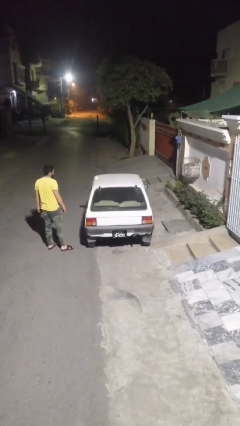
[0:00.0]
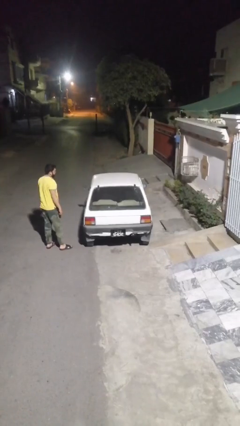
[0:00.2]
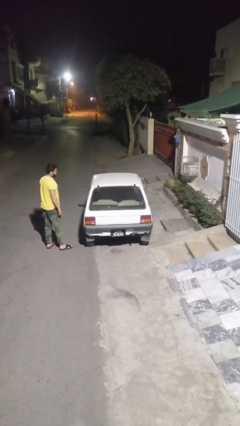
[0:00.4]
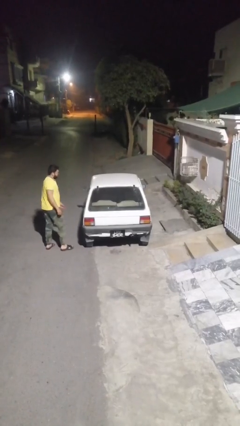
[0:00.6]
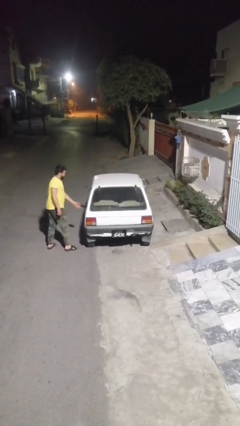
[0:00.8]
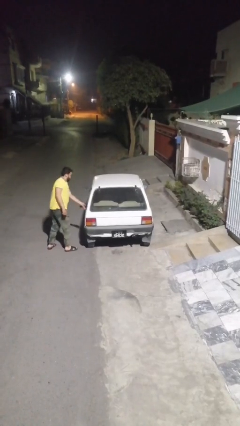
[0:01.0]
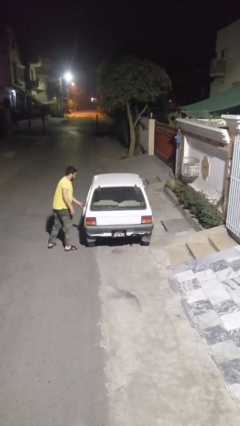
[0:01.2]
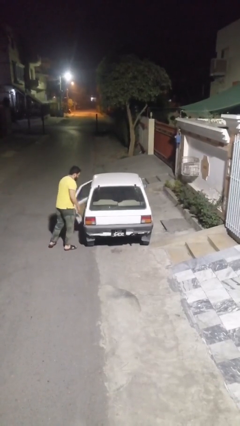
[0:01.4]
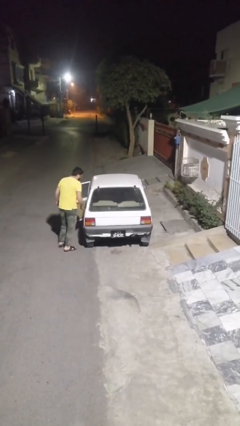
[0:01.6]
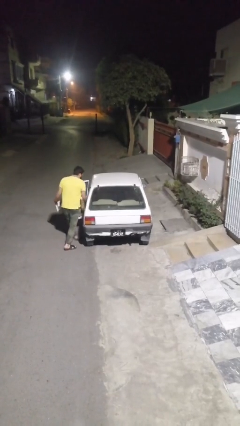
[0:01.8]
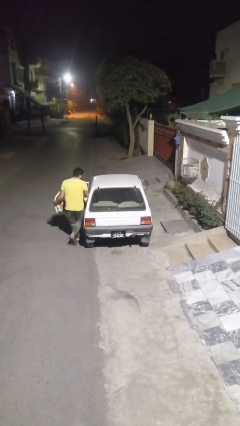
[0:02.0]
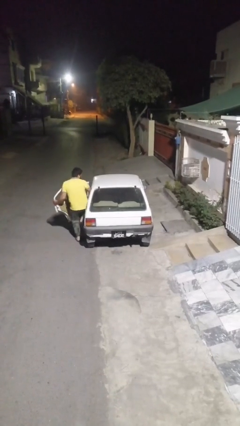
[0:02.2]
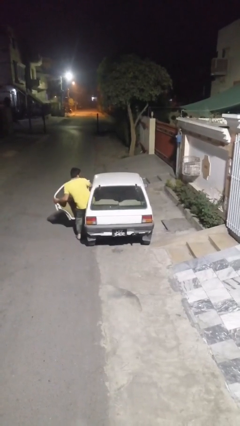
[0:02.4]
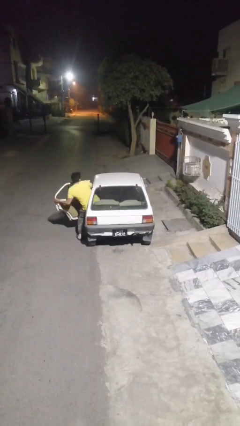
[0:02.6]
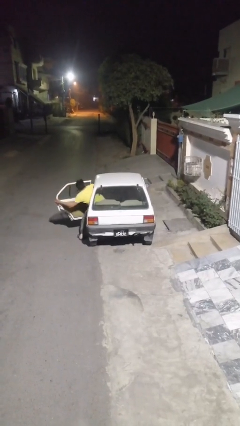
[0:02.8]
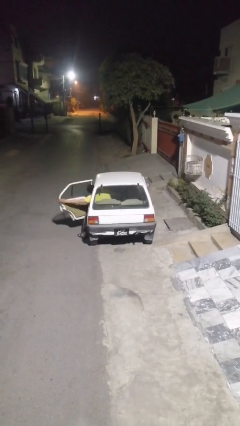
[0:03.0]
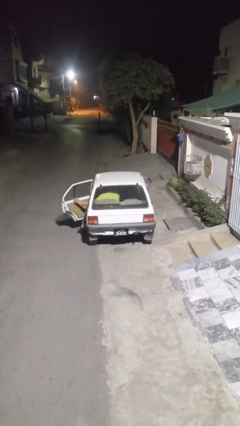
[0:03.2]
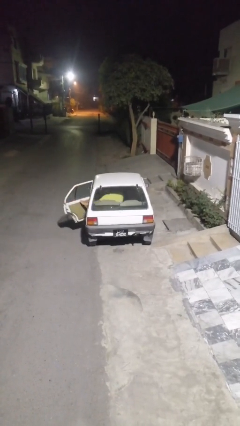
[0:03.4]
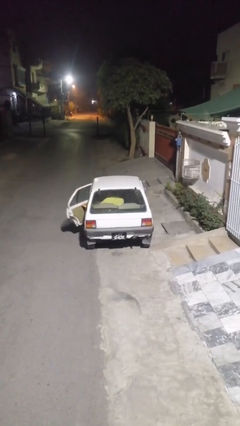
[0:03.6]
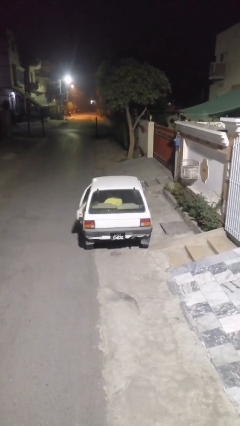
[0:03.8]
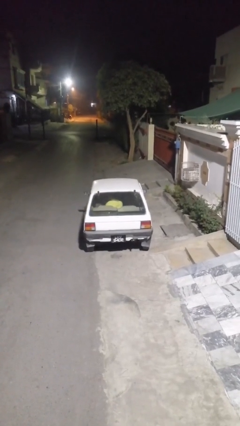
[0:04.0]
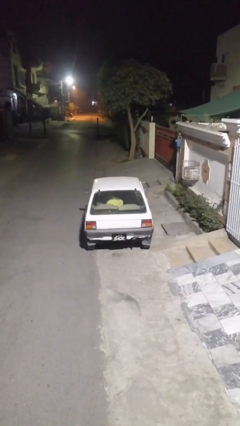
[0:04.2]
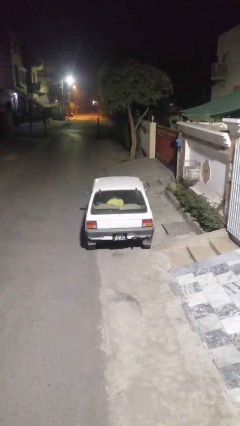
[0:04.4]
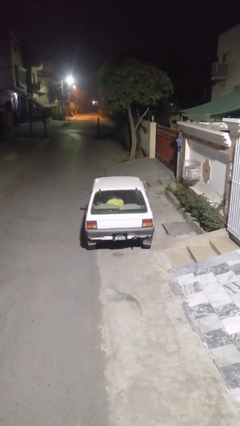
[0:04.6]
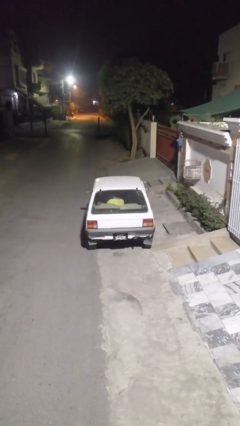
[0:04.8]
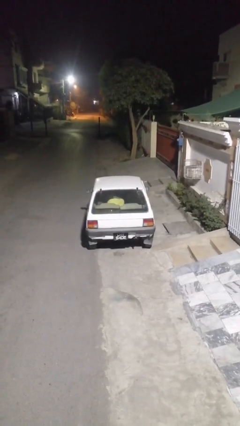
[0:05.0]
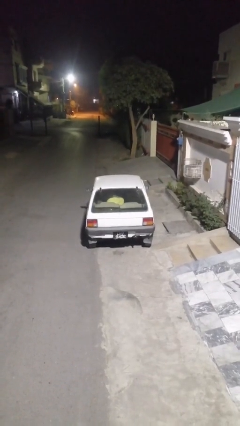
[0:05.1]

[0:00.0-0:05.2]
car picks up person

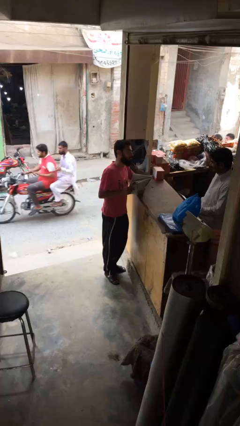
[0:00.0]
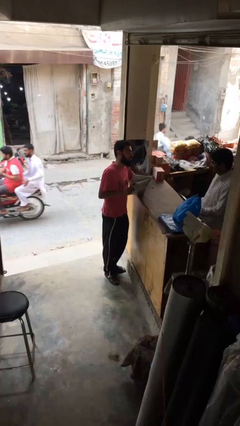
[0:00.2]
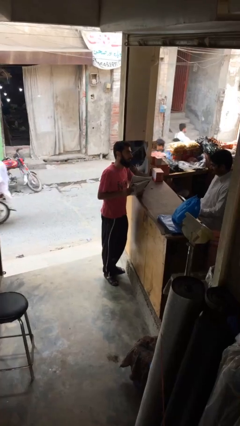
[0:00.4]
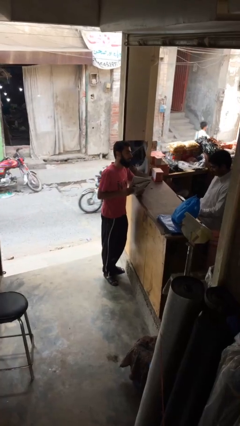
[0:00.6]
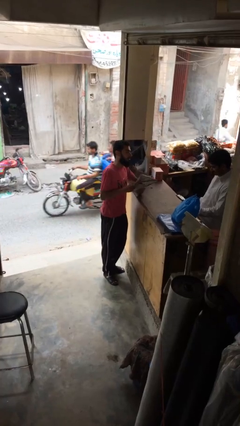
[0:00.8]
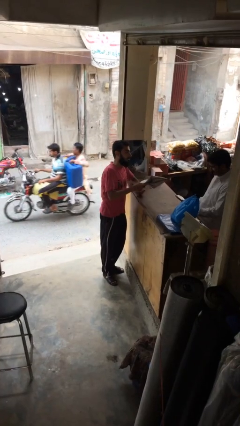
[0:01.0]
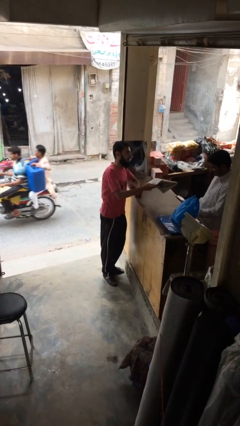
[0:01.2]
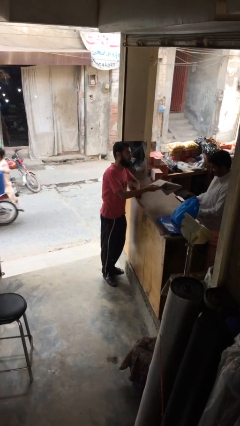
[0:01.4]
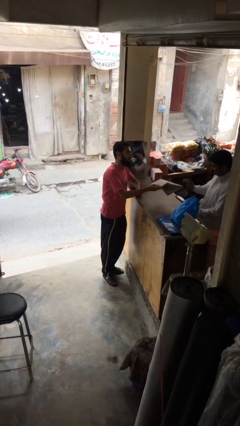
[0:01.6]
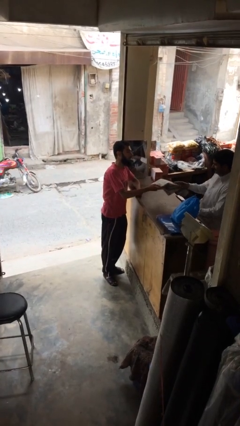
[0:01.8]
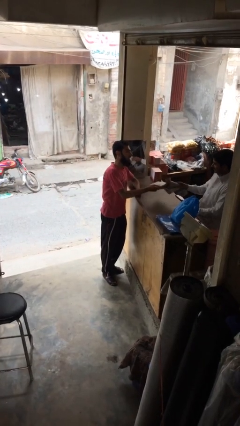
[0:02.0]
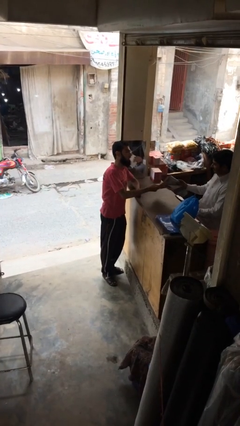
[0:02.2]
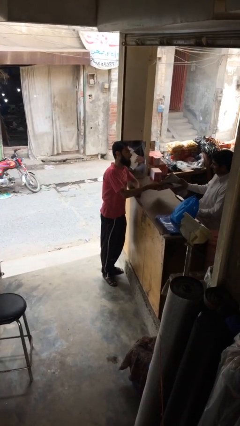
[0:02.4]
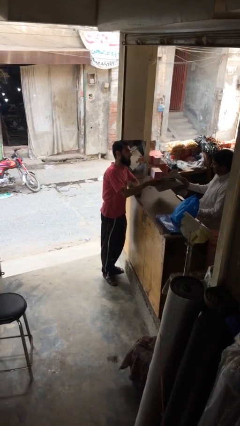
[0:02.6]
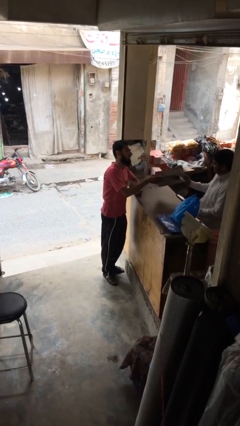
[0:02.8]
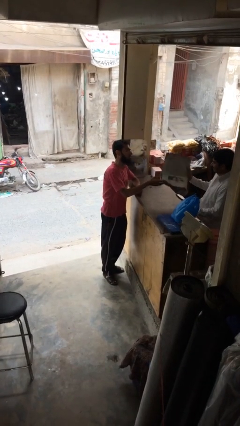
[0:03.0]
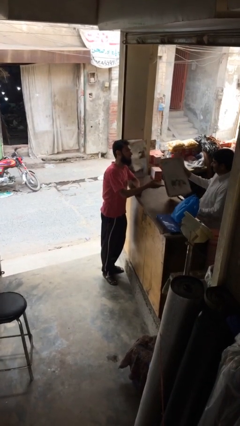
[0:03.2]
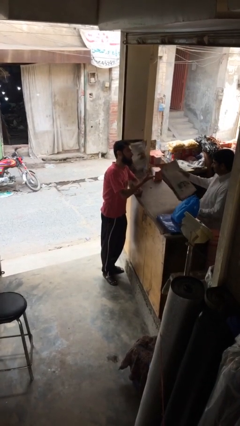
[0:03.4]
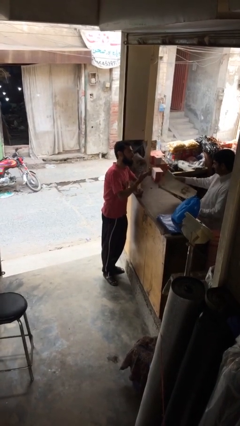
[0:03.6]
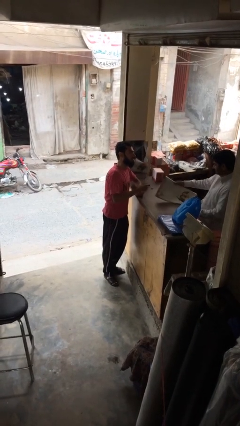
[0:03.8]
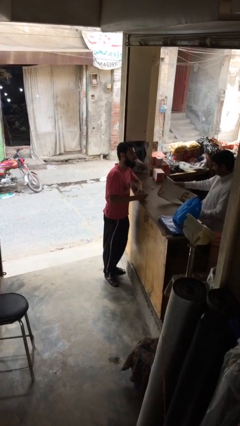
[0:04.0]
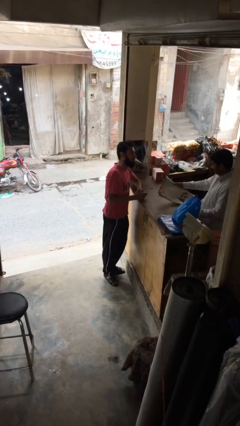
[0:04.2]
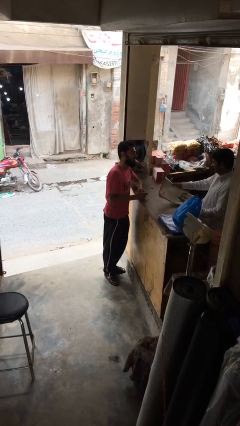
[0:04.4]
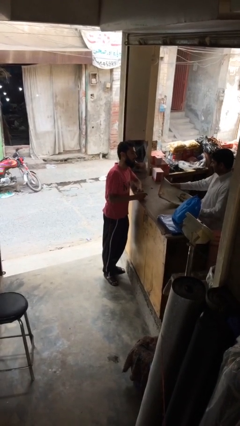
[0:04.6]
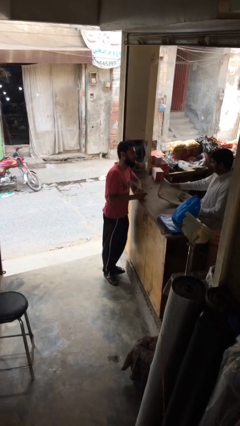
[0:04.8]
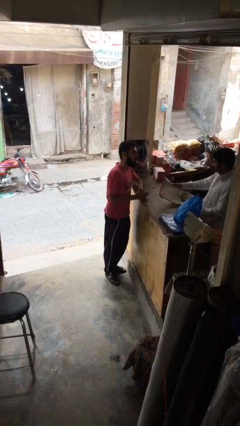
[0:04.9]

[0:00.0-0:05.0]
person transfers object to person

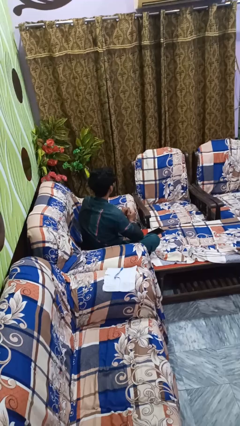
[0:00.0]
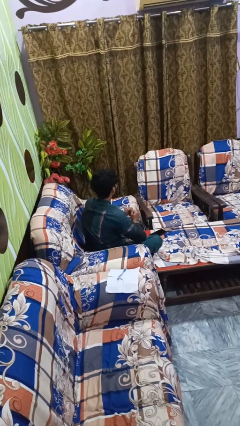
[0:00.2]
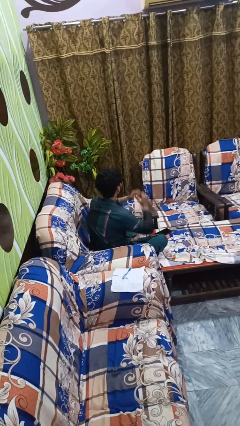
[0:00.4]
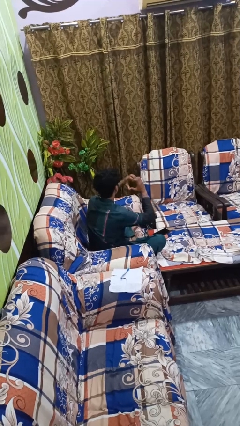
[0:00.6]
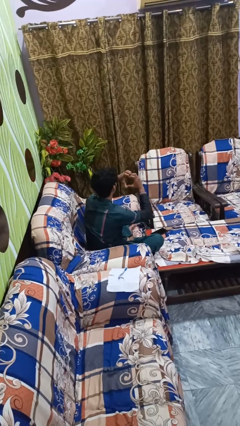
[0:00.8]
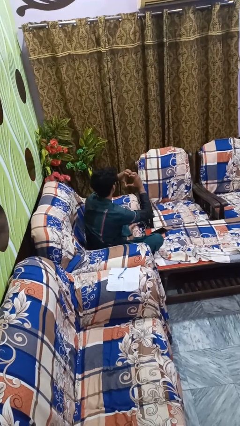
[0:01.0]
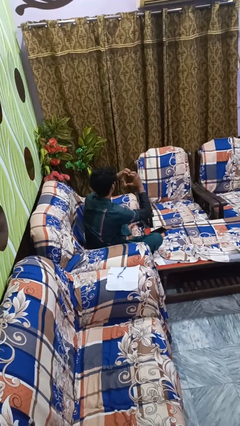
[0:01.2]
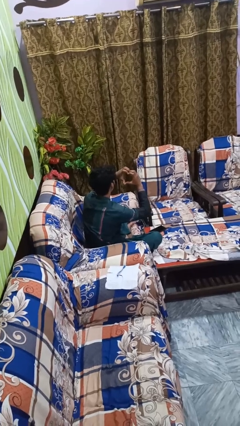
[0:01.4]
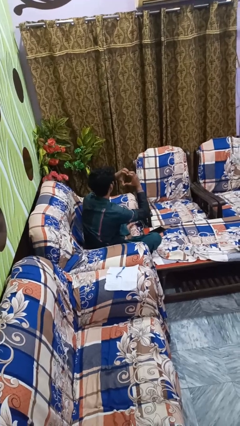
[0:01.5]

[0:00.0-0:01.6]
person gestures heart

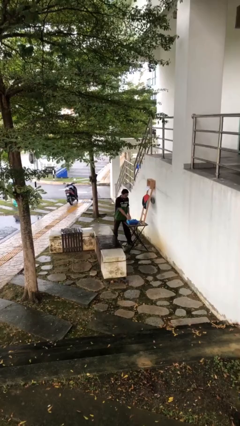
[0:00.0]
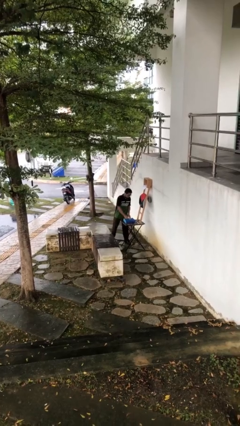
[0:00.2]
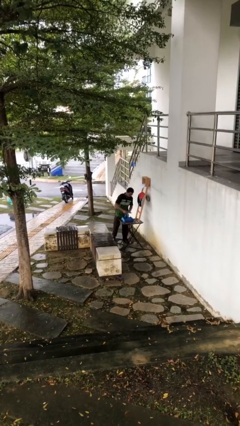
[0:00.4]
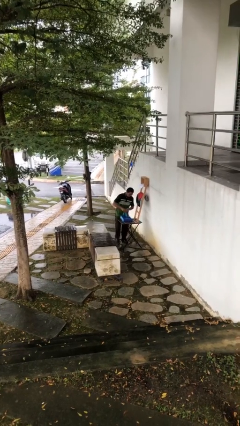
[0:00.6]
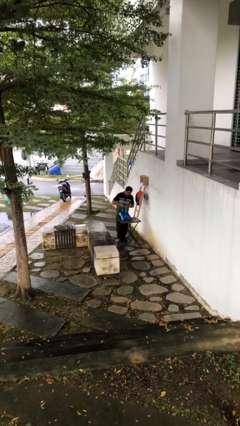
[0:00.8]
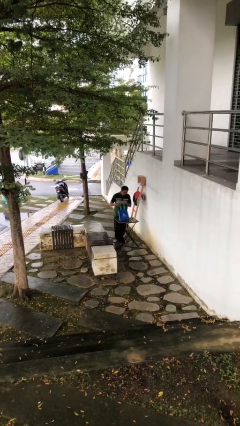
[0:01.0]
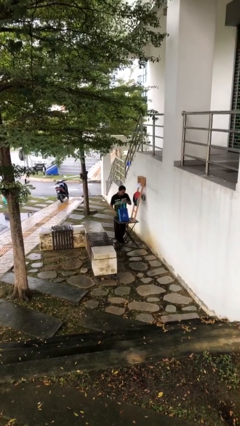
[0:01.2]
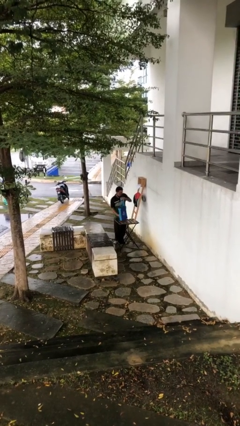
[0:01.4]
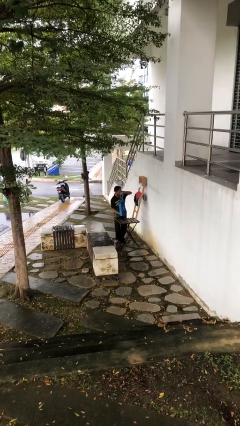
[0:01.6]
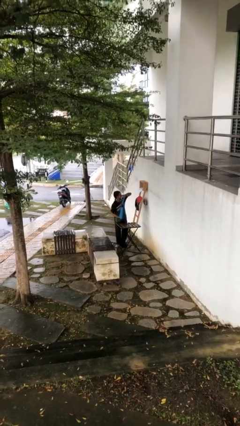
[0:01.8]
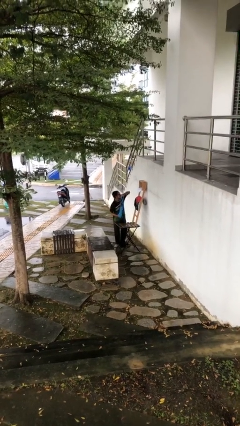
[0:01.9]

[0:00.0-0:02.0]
person picks up object from table

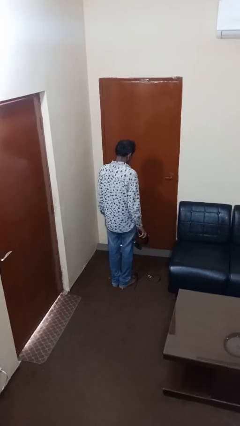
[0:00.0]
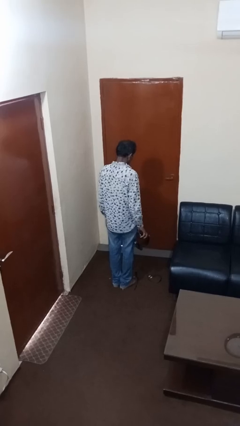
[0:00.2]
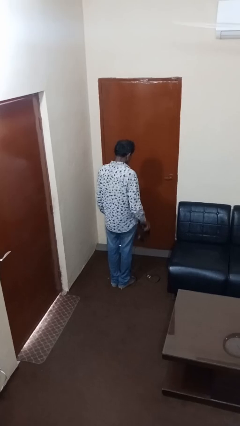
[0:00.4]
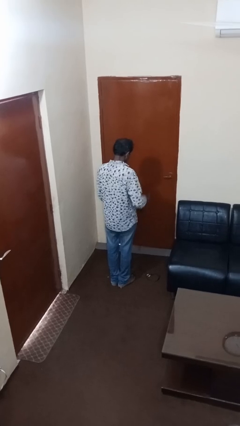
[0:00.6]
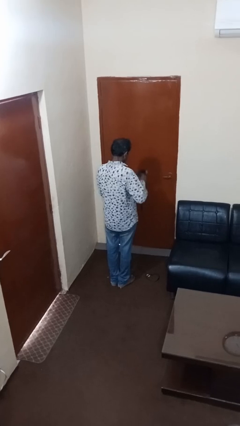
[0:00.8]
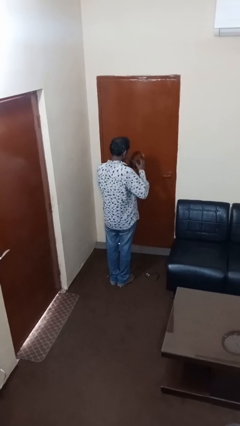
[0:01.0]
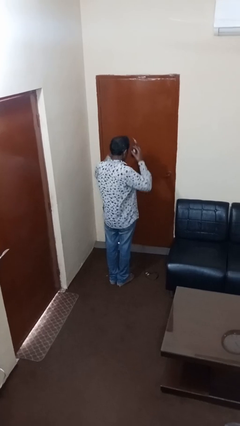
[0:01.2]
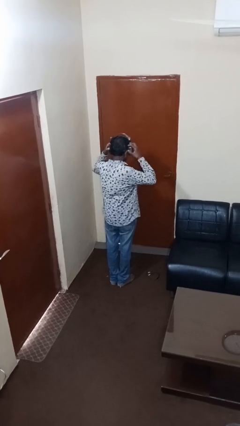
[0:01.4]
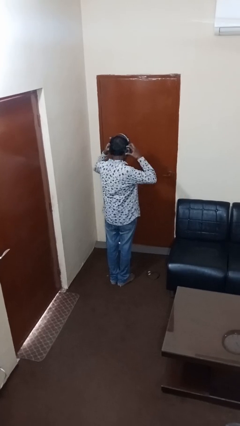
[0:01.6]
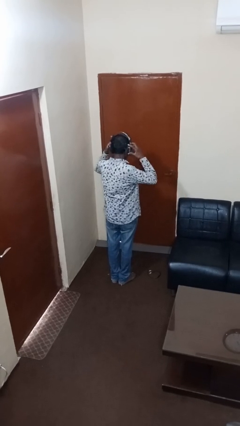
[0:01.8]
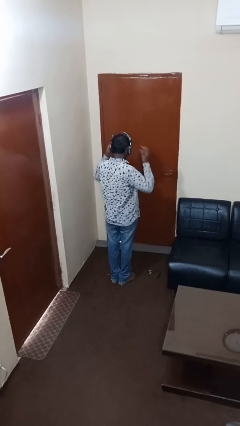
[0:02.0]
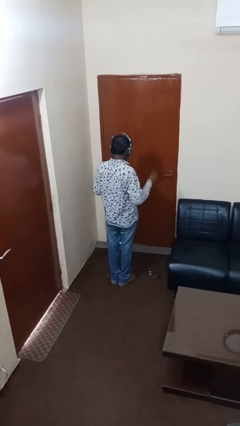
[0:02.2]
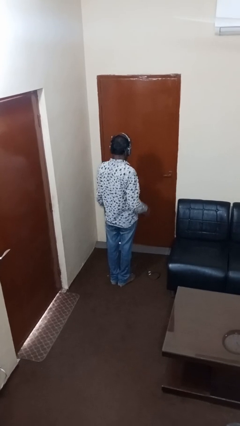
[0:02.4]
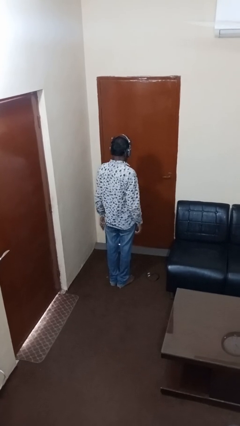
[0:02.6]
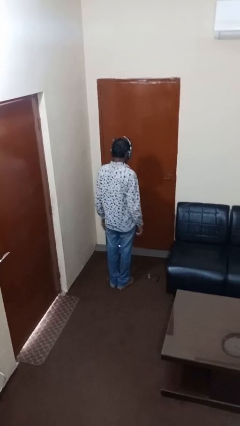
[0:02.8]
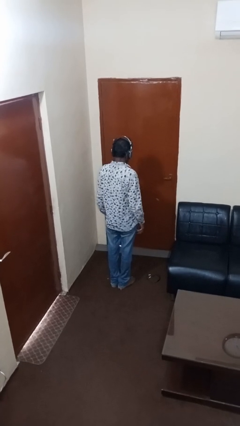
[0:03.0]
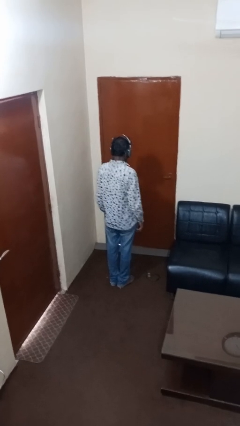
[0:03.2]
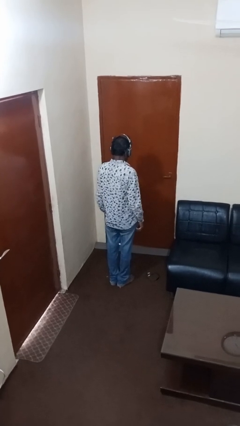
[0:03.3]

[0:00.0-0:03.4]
person puts on headphones

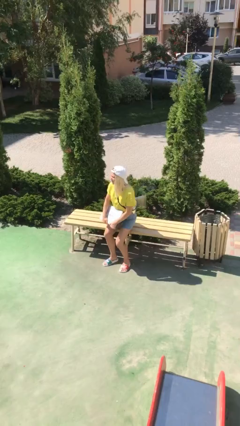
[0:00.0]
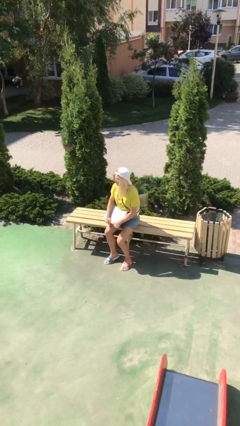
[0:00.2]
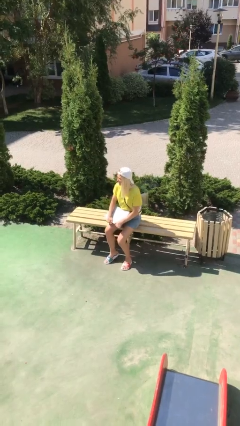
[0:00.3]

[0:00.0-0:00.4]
person sits down
